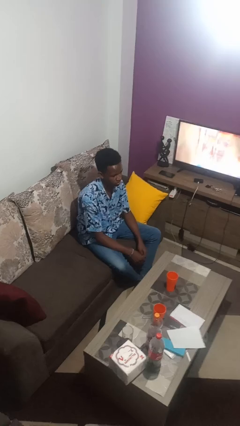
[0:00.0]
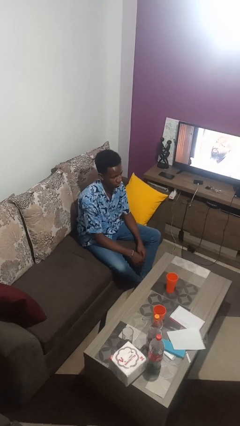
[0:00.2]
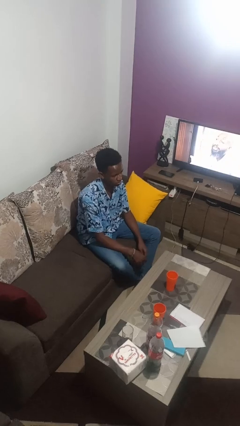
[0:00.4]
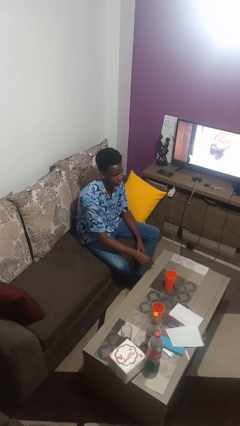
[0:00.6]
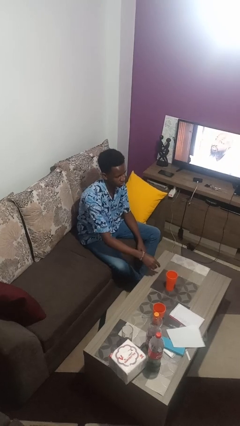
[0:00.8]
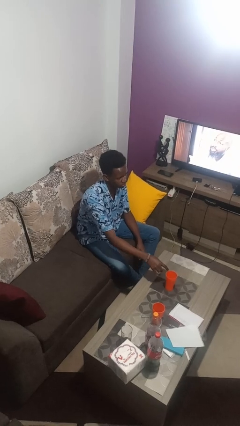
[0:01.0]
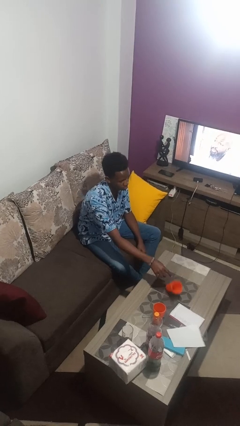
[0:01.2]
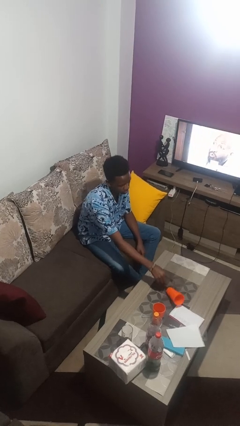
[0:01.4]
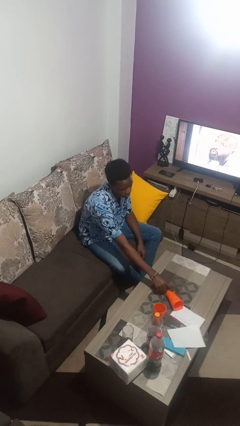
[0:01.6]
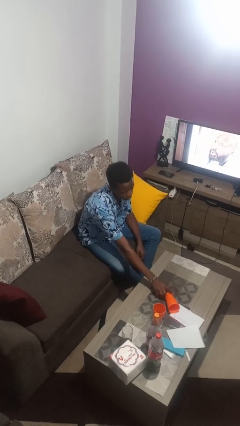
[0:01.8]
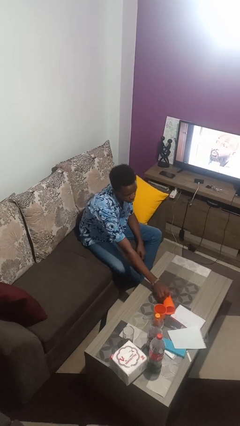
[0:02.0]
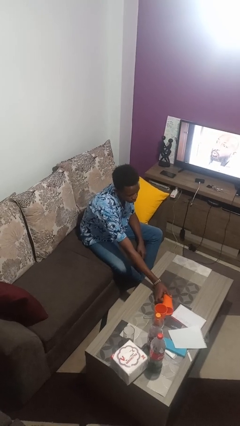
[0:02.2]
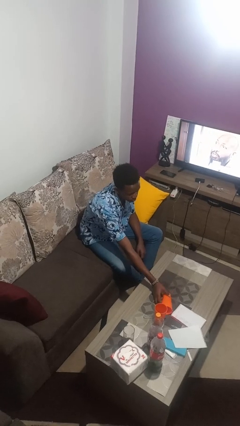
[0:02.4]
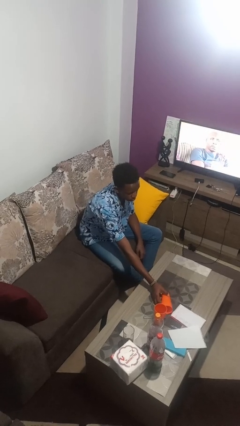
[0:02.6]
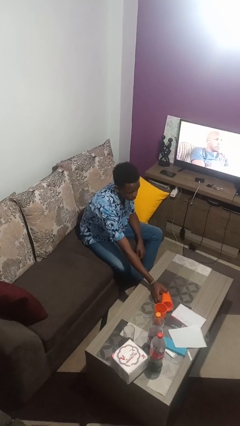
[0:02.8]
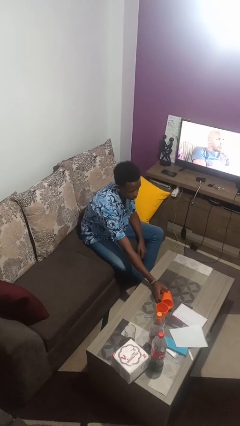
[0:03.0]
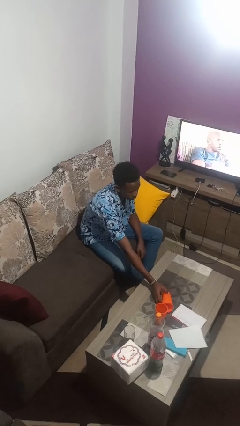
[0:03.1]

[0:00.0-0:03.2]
person knocks over glass

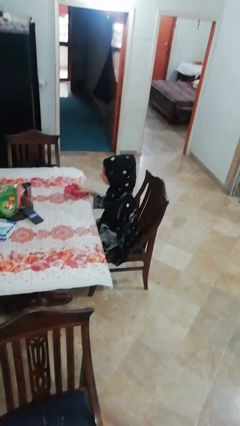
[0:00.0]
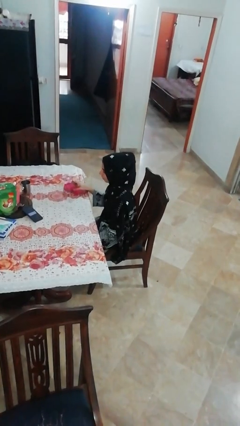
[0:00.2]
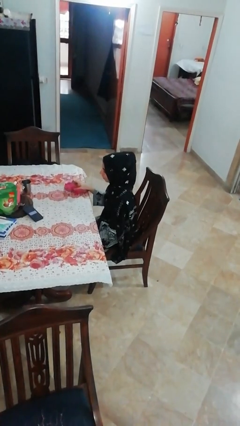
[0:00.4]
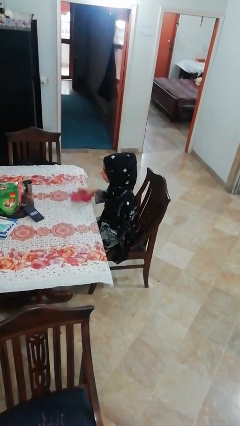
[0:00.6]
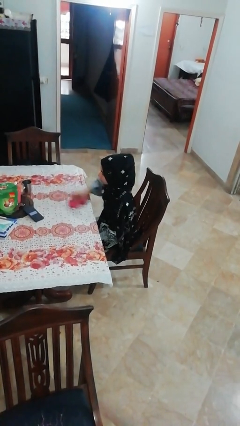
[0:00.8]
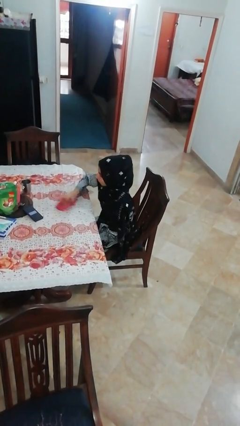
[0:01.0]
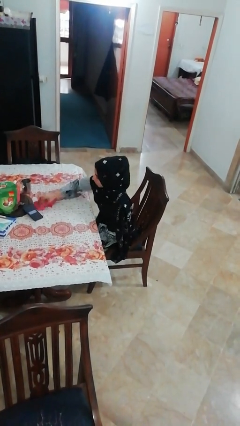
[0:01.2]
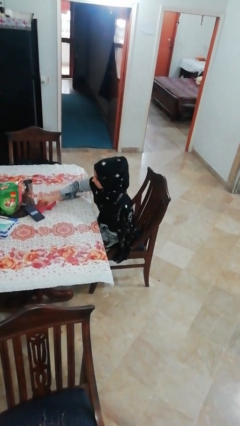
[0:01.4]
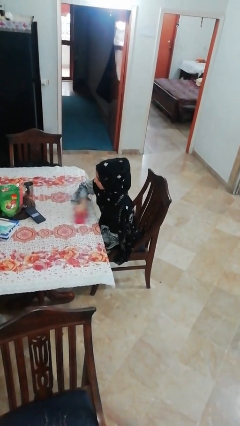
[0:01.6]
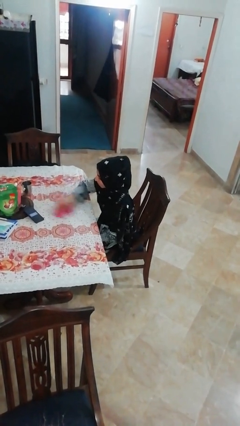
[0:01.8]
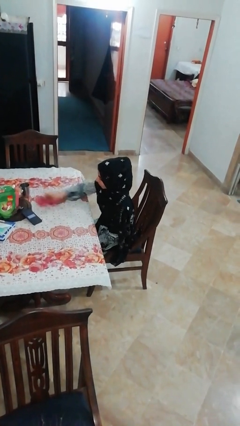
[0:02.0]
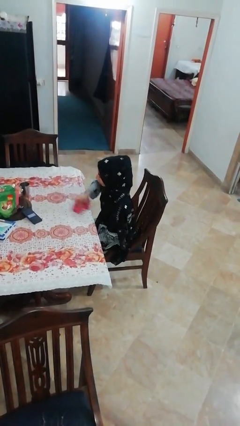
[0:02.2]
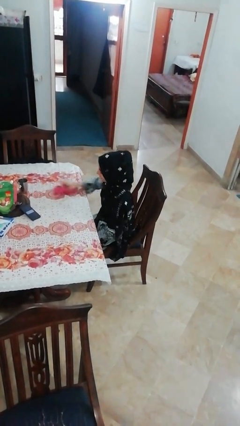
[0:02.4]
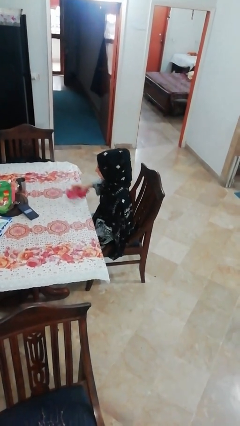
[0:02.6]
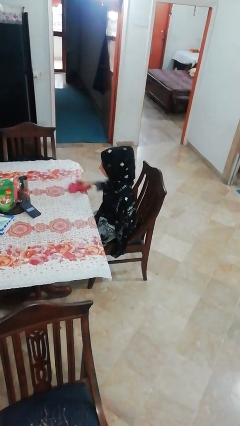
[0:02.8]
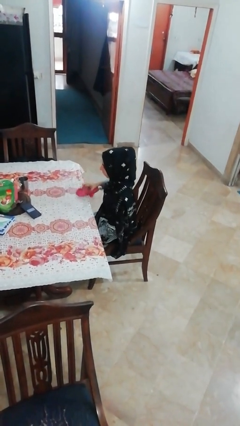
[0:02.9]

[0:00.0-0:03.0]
person cleans table with rag

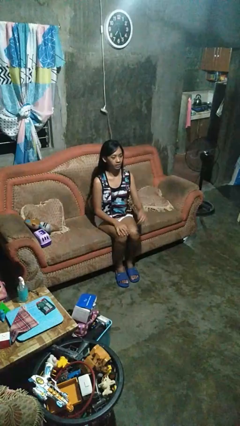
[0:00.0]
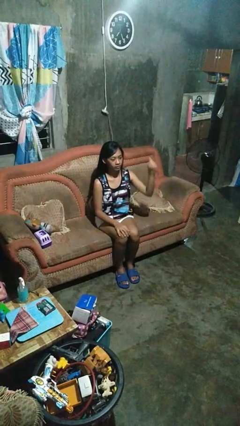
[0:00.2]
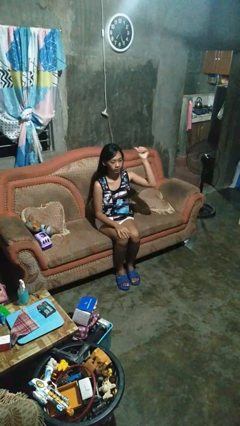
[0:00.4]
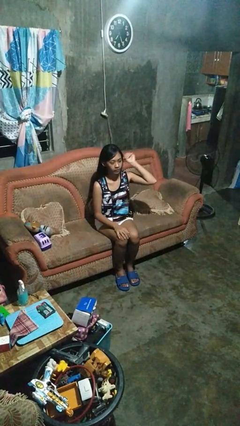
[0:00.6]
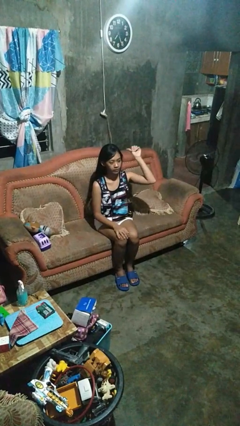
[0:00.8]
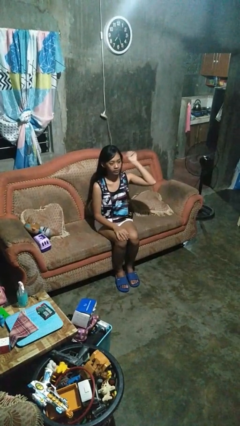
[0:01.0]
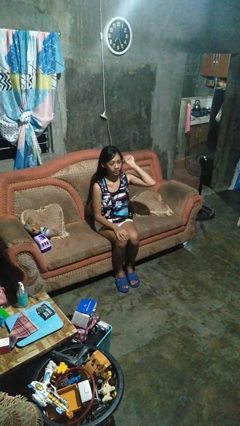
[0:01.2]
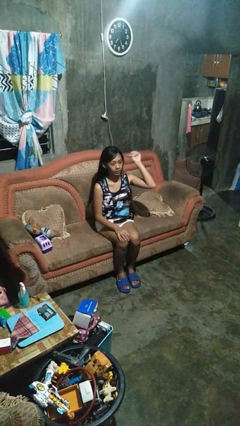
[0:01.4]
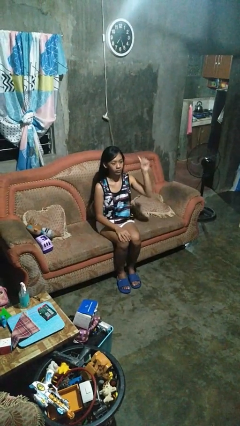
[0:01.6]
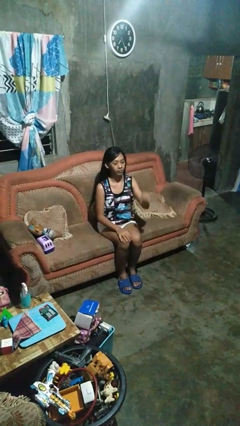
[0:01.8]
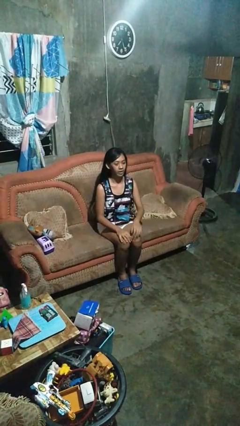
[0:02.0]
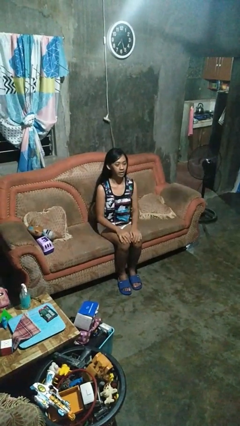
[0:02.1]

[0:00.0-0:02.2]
person gestures behind me

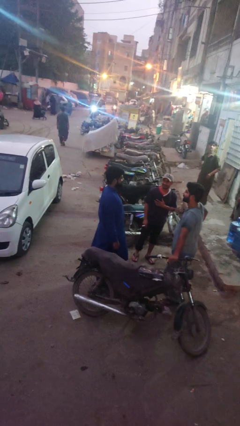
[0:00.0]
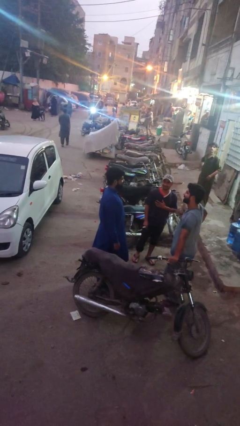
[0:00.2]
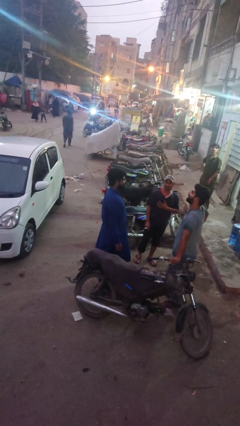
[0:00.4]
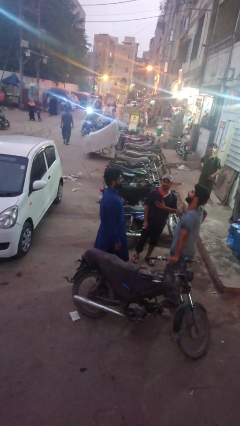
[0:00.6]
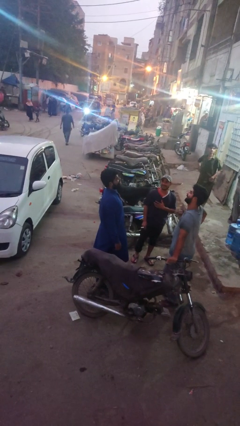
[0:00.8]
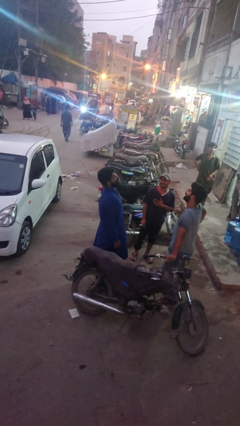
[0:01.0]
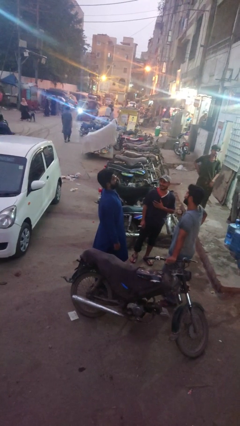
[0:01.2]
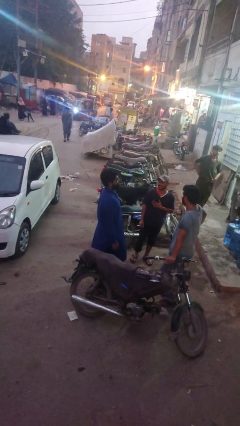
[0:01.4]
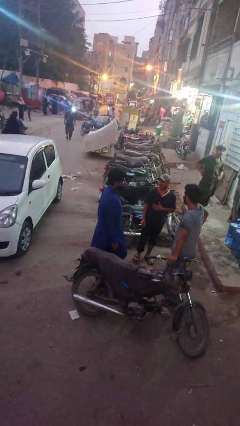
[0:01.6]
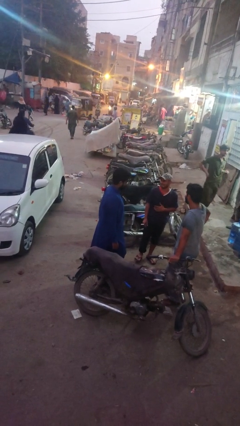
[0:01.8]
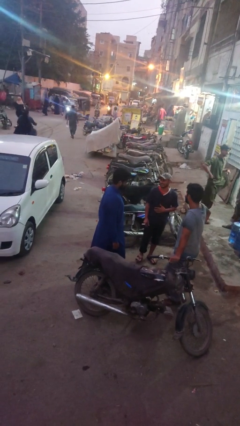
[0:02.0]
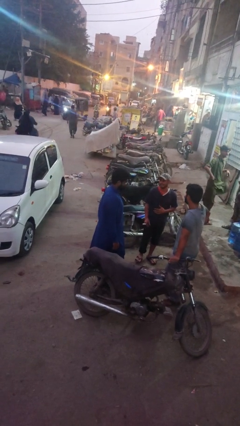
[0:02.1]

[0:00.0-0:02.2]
person laughs with person

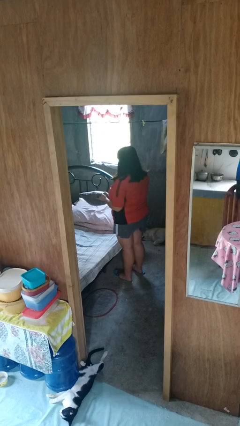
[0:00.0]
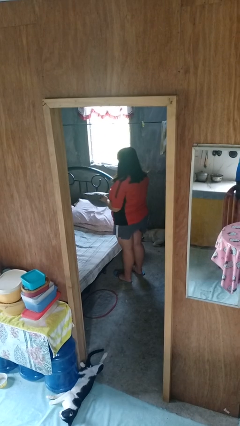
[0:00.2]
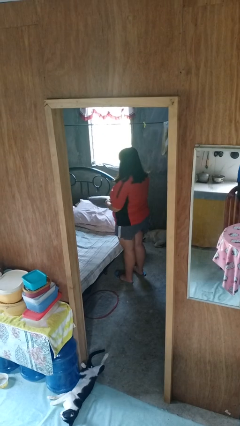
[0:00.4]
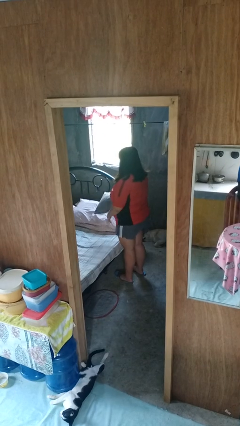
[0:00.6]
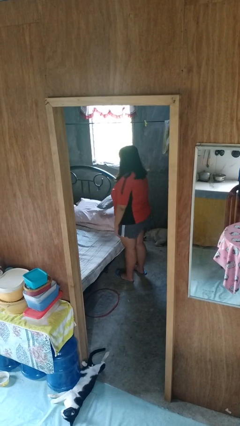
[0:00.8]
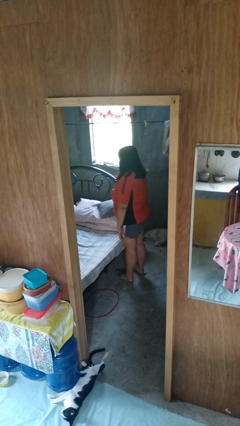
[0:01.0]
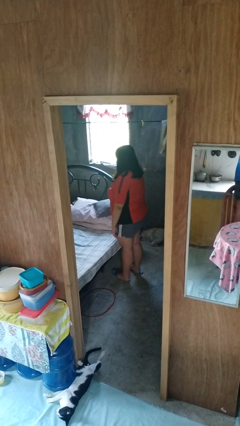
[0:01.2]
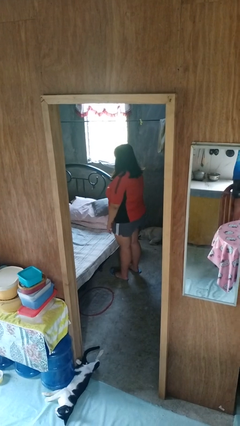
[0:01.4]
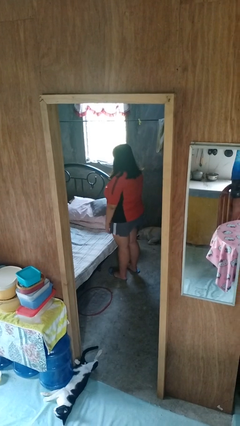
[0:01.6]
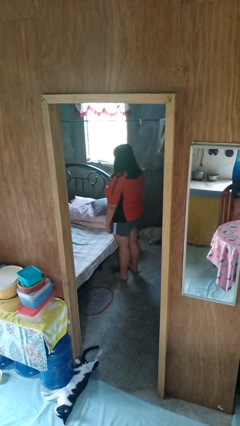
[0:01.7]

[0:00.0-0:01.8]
person puts down object on bed

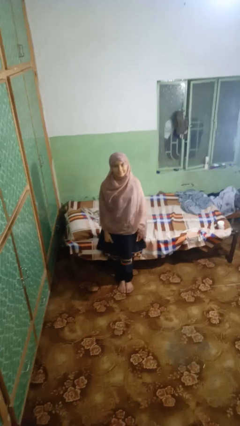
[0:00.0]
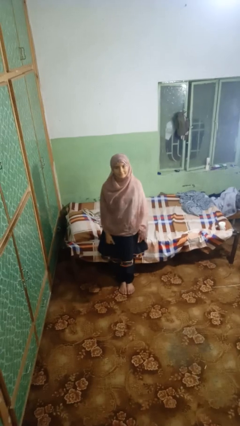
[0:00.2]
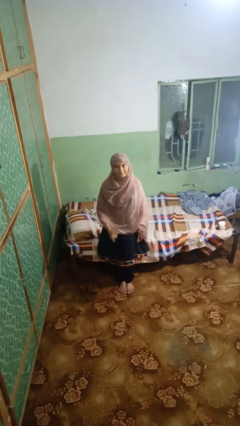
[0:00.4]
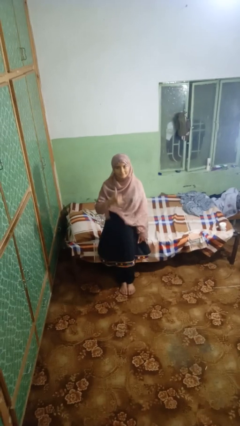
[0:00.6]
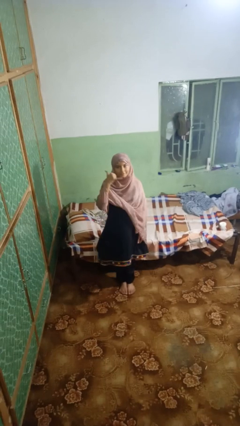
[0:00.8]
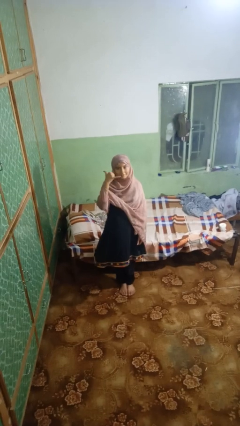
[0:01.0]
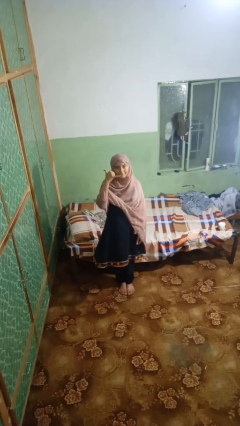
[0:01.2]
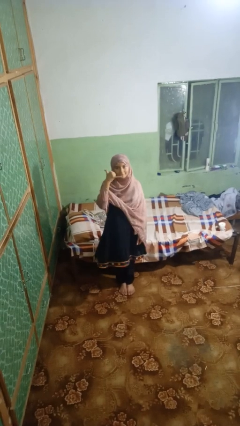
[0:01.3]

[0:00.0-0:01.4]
person gestures call me

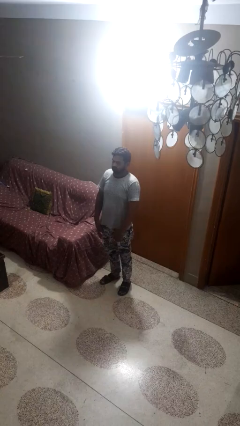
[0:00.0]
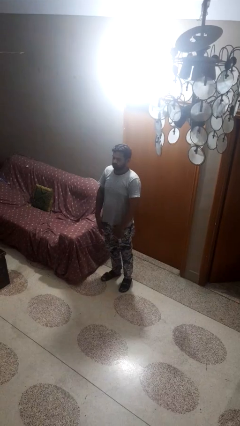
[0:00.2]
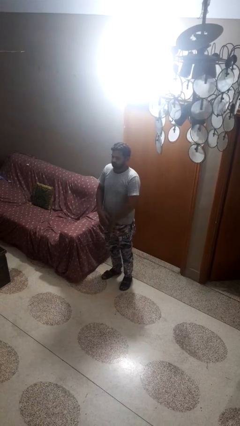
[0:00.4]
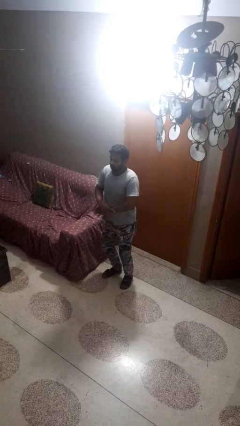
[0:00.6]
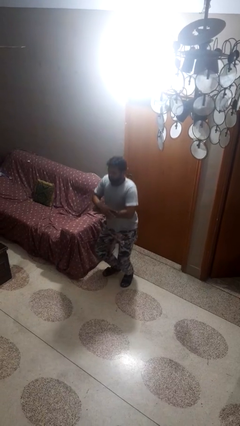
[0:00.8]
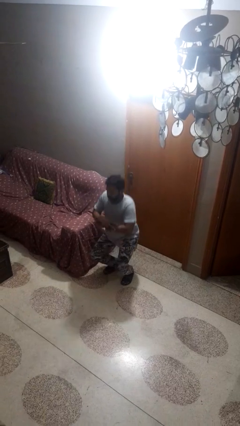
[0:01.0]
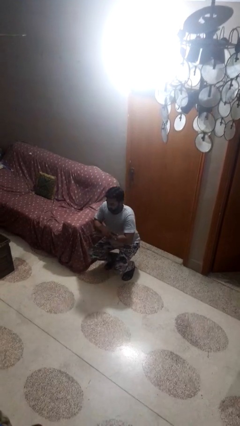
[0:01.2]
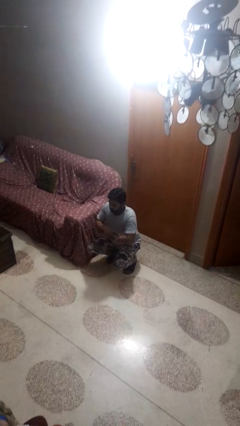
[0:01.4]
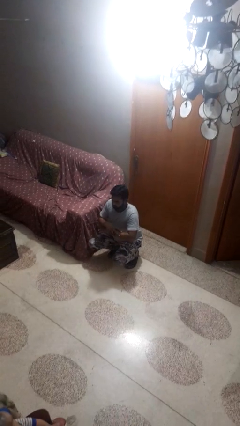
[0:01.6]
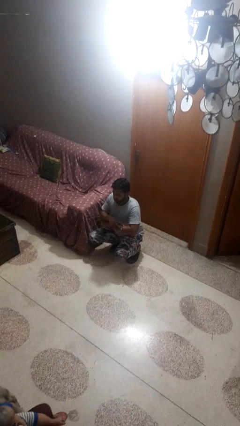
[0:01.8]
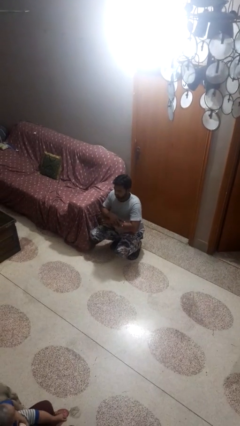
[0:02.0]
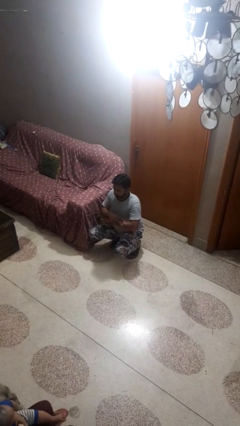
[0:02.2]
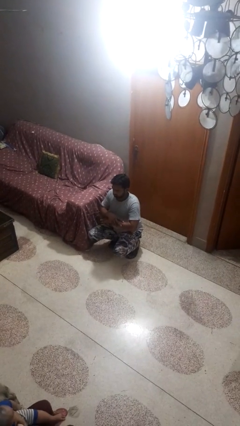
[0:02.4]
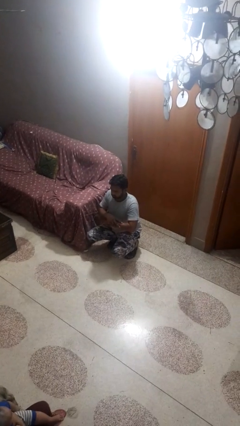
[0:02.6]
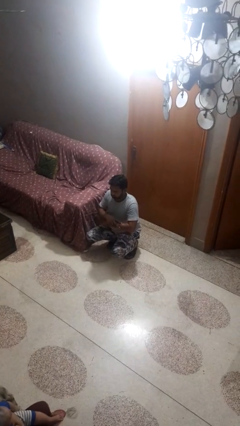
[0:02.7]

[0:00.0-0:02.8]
person squats

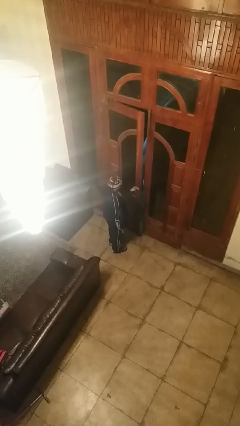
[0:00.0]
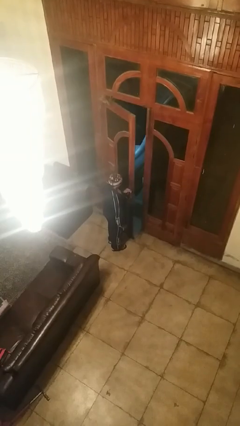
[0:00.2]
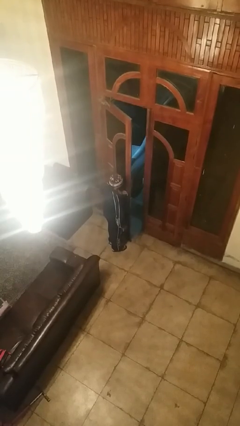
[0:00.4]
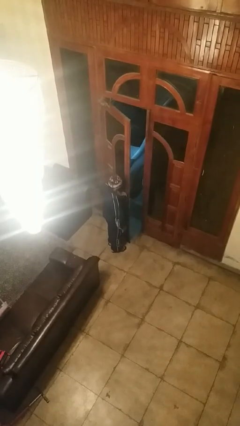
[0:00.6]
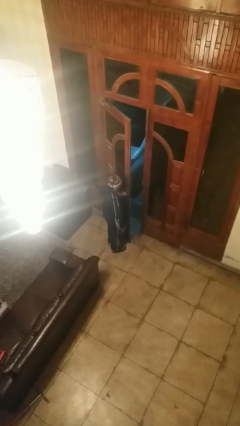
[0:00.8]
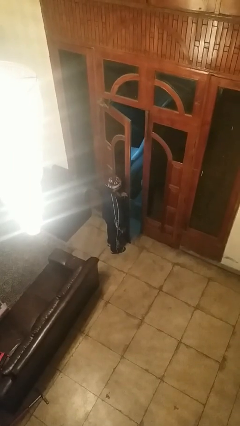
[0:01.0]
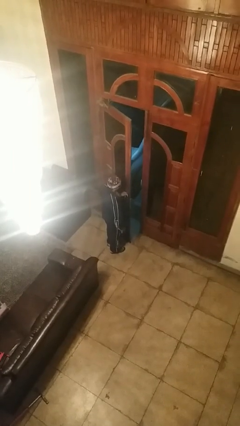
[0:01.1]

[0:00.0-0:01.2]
person opens facility door
